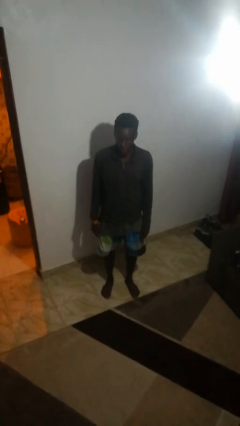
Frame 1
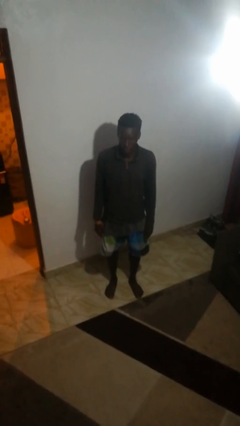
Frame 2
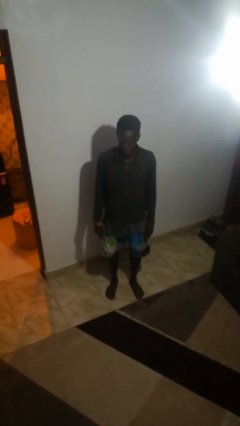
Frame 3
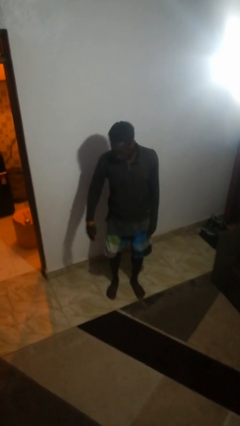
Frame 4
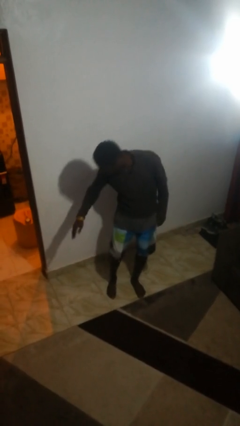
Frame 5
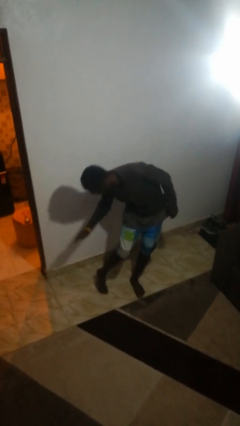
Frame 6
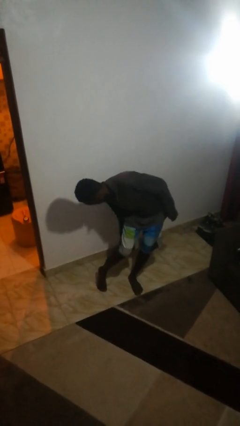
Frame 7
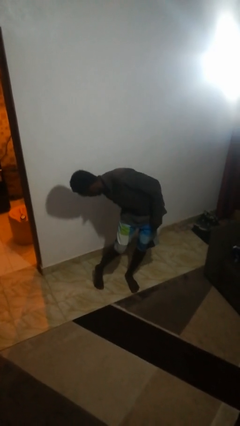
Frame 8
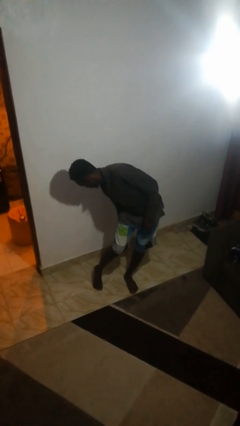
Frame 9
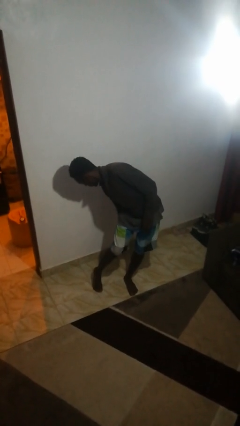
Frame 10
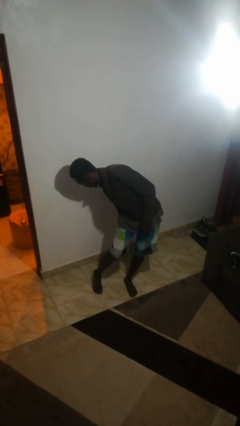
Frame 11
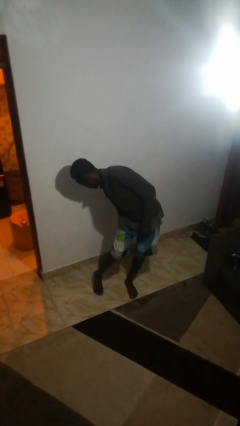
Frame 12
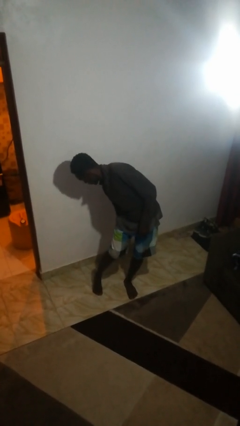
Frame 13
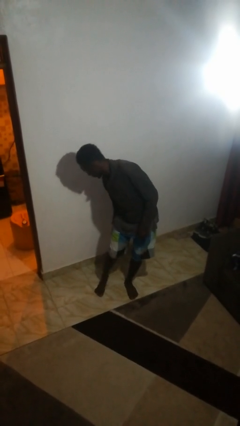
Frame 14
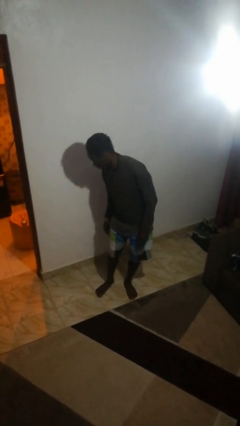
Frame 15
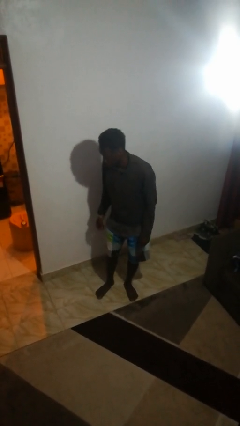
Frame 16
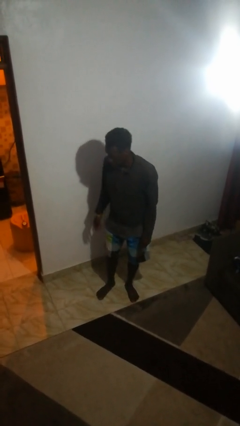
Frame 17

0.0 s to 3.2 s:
person swats bug

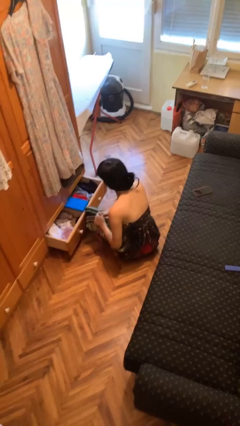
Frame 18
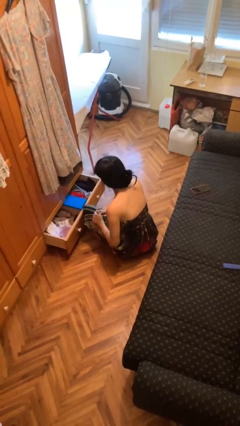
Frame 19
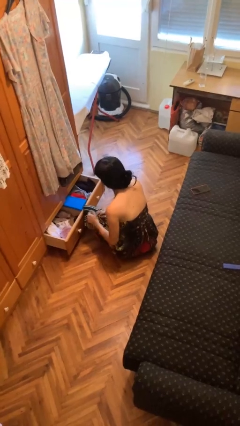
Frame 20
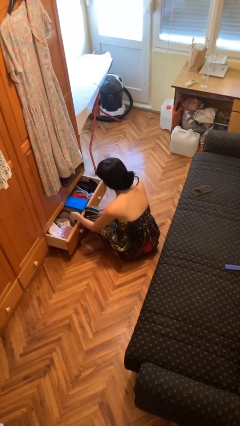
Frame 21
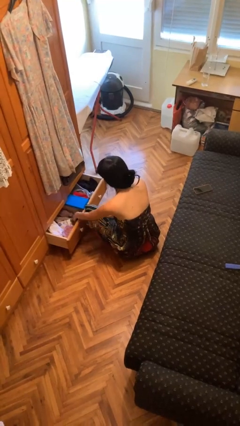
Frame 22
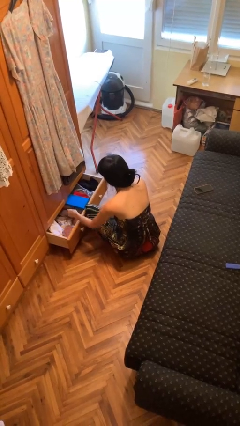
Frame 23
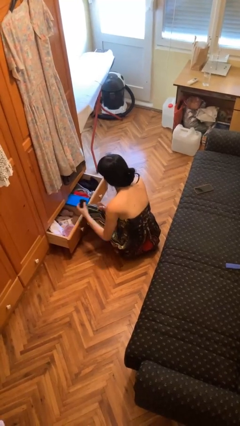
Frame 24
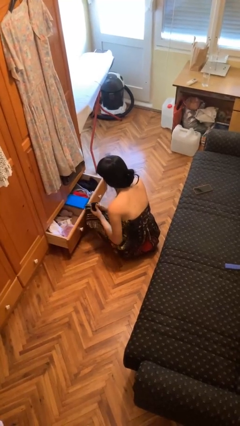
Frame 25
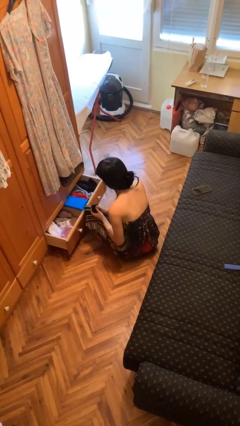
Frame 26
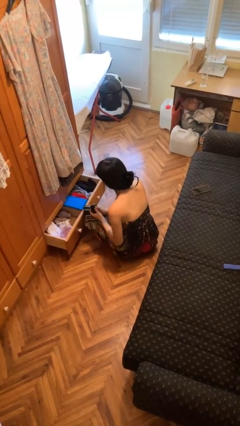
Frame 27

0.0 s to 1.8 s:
person takes clothes from dresser

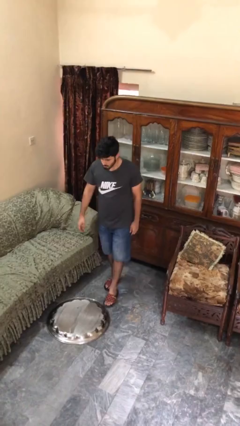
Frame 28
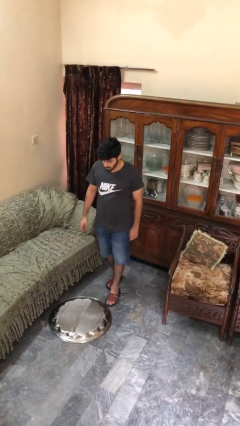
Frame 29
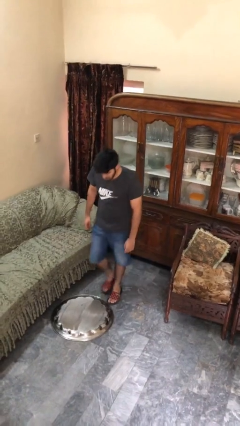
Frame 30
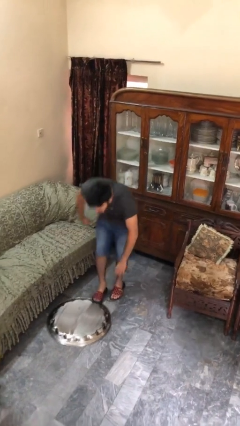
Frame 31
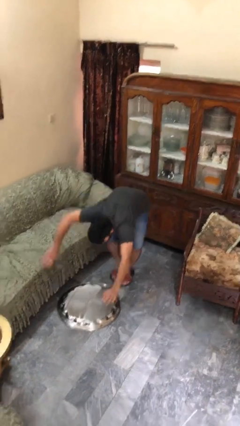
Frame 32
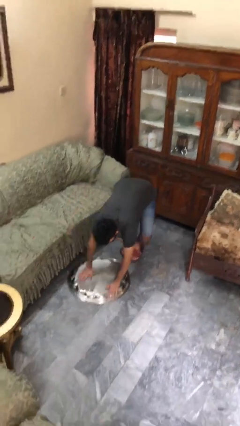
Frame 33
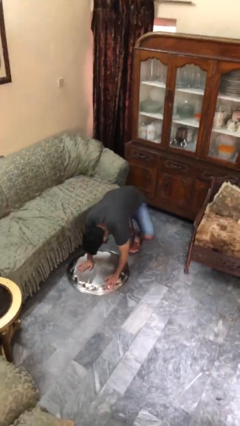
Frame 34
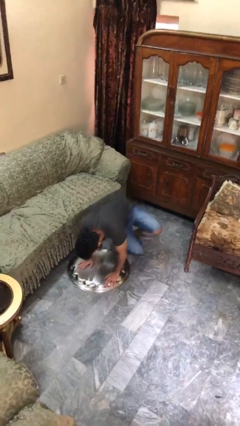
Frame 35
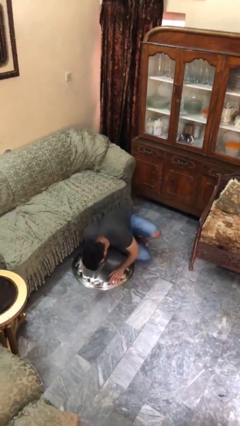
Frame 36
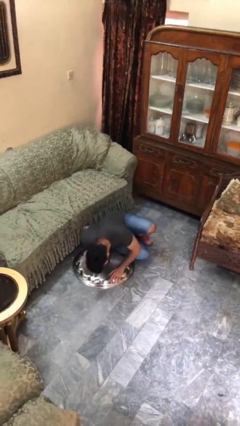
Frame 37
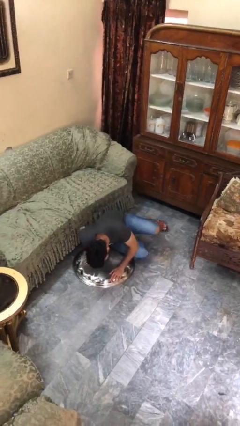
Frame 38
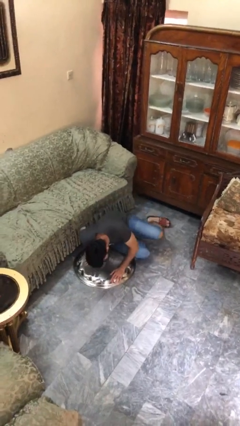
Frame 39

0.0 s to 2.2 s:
person trips on object on floor

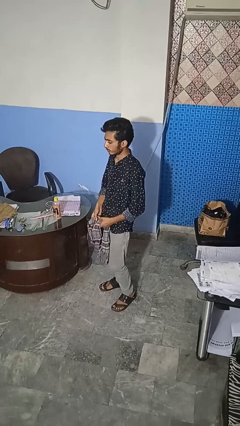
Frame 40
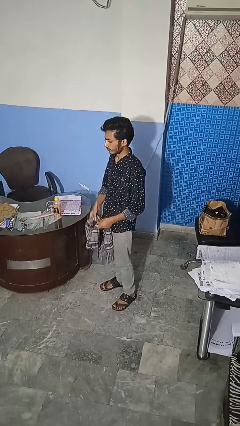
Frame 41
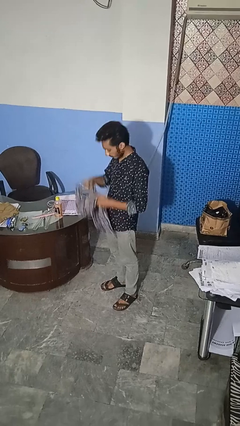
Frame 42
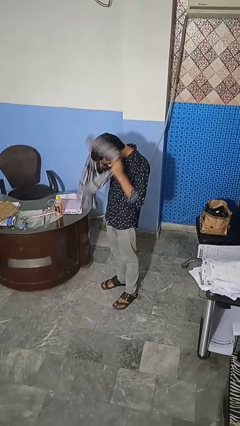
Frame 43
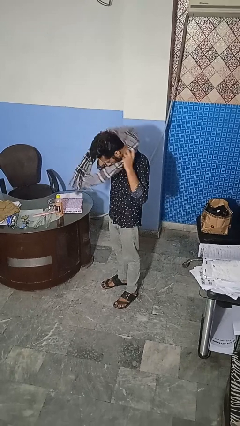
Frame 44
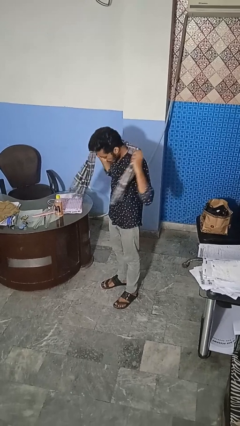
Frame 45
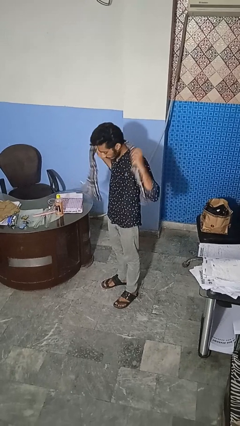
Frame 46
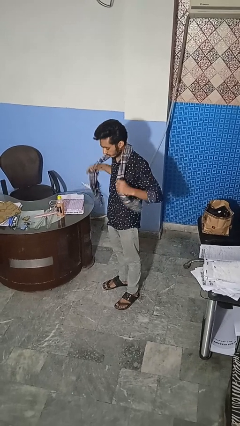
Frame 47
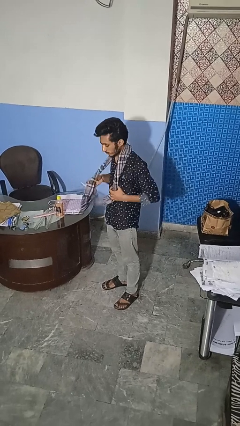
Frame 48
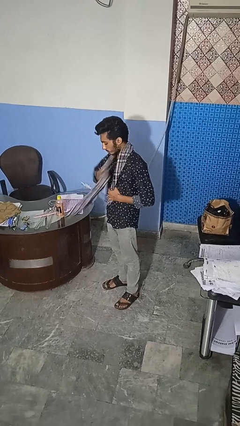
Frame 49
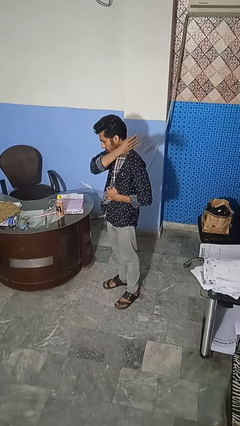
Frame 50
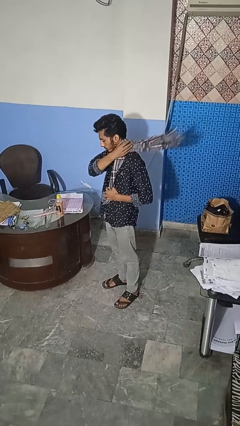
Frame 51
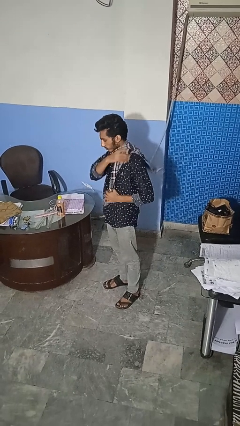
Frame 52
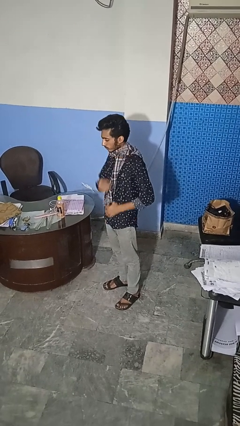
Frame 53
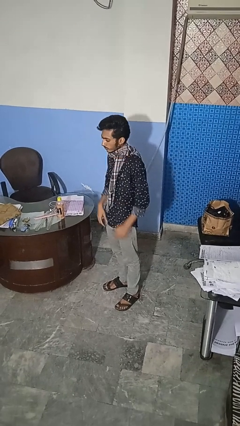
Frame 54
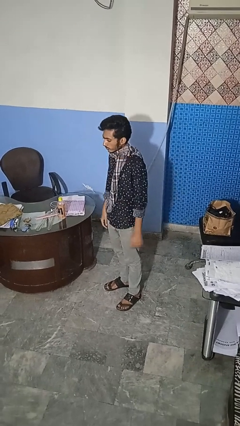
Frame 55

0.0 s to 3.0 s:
person puts on scarf

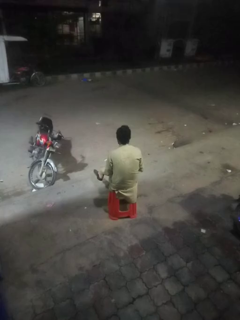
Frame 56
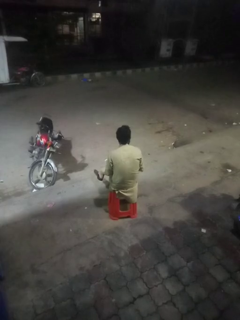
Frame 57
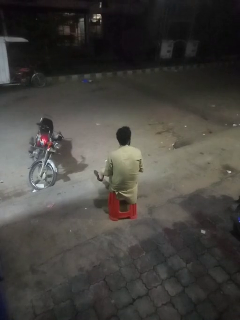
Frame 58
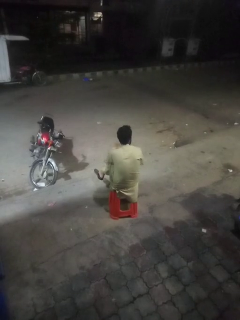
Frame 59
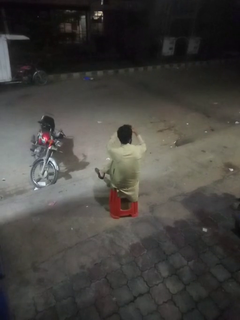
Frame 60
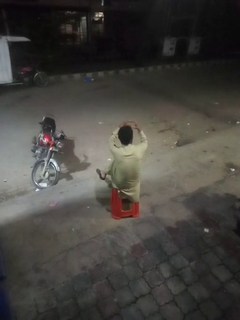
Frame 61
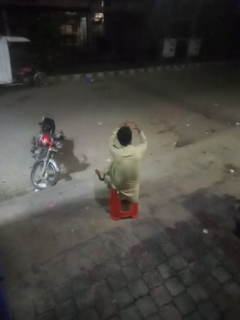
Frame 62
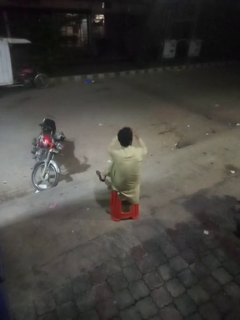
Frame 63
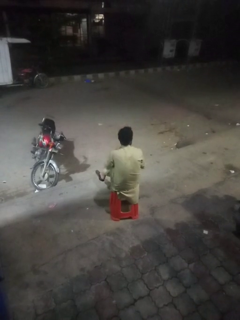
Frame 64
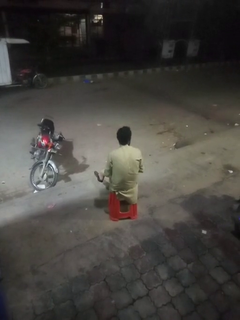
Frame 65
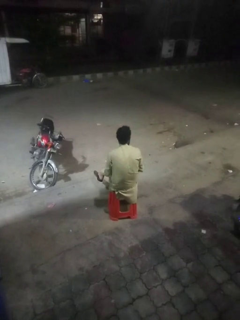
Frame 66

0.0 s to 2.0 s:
person gestures heart

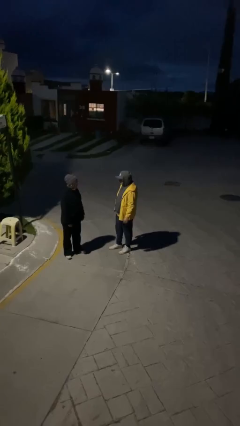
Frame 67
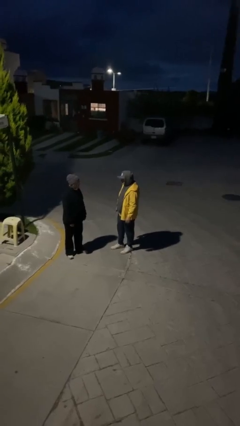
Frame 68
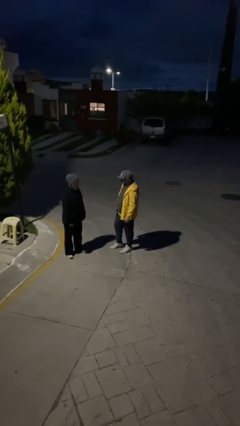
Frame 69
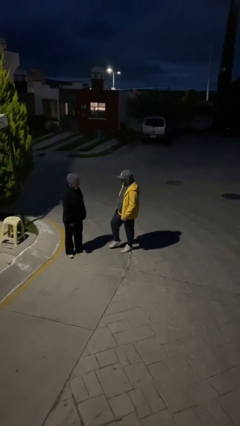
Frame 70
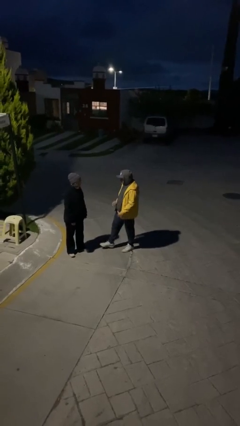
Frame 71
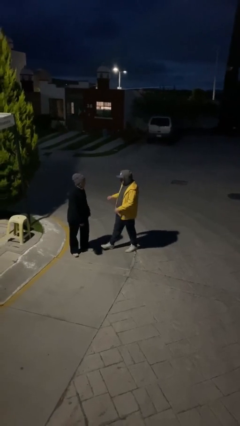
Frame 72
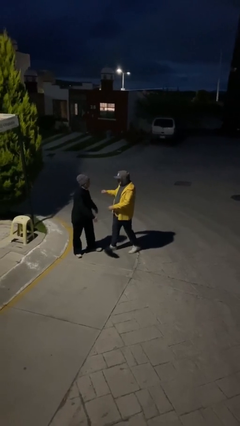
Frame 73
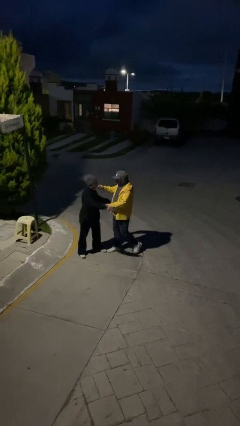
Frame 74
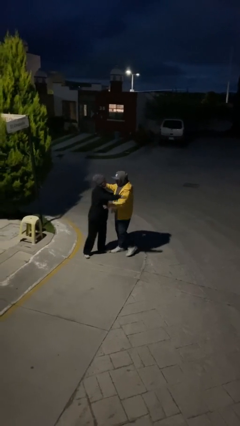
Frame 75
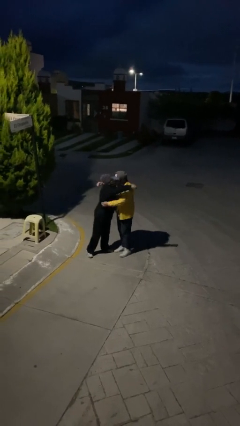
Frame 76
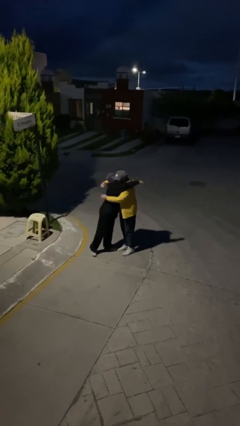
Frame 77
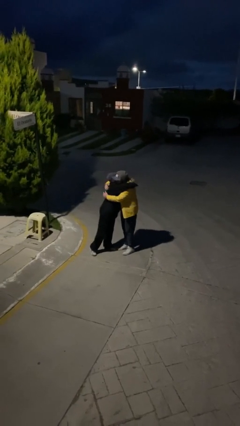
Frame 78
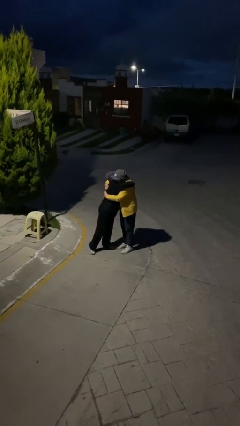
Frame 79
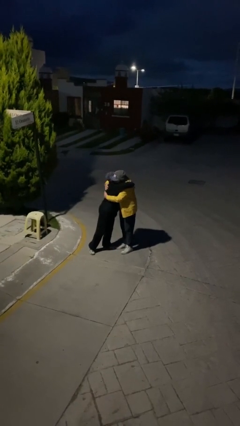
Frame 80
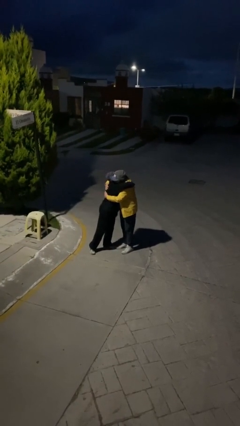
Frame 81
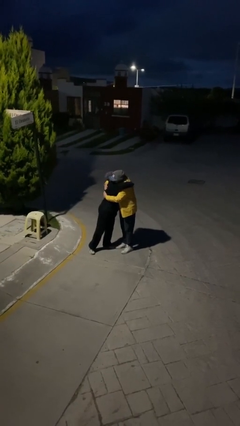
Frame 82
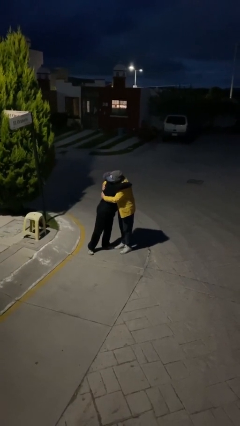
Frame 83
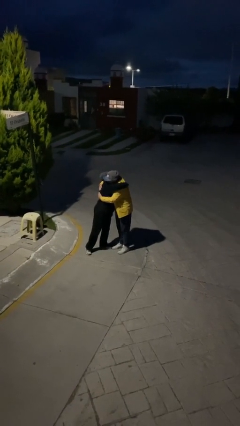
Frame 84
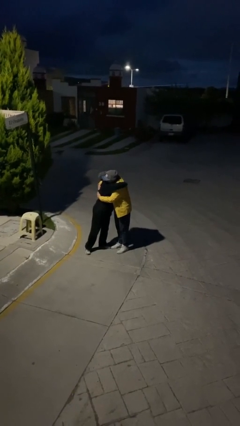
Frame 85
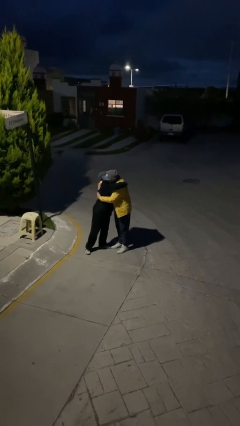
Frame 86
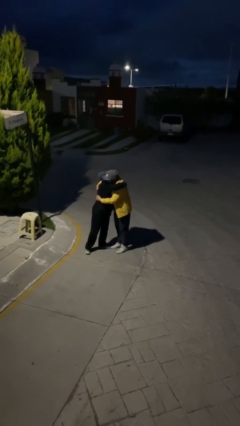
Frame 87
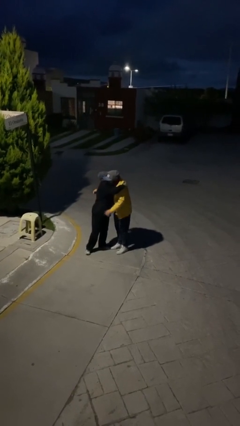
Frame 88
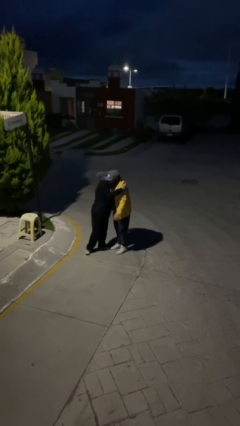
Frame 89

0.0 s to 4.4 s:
person embraces person

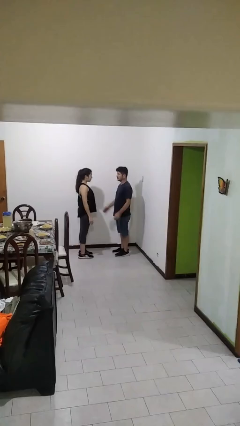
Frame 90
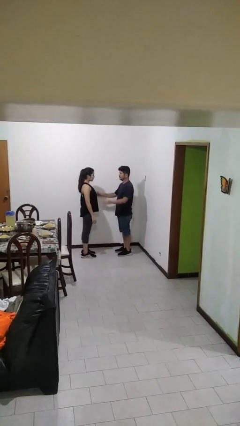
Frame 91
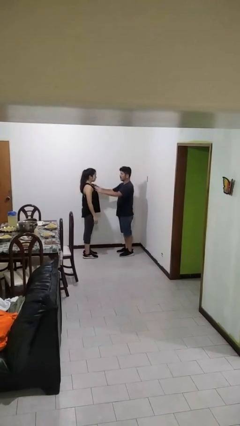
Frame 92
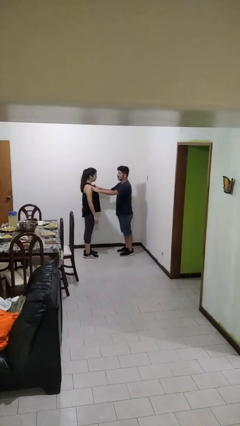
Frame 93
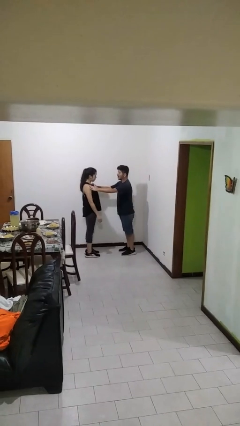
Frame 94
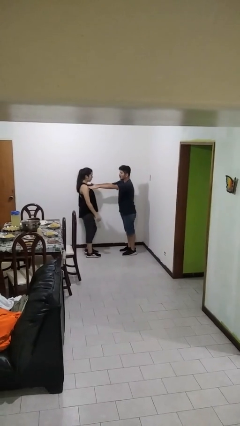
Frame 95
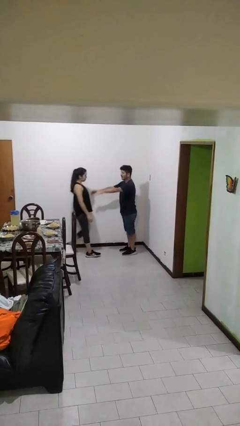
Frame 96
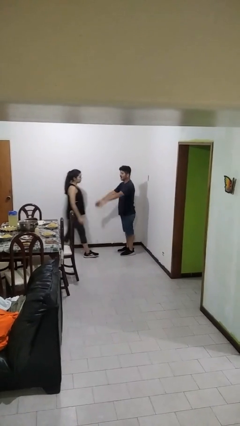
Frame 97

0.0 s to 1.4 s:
person shoves person
